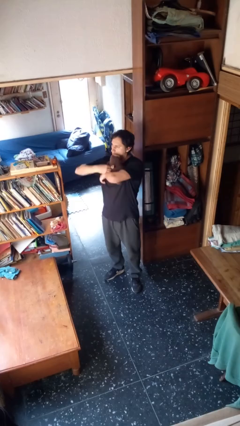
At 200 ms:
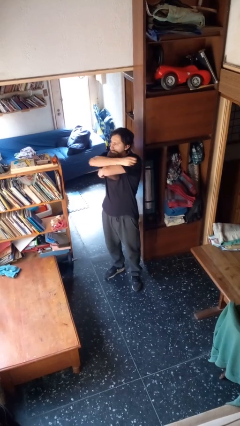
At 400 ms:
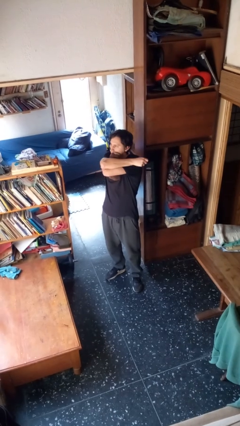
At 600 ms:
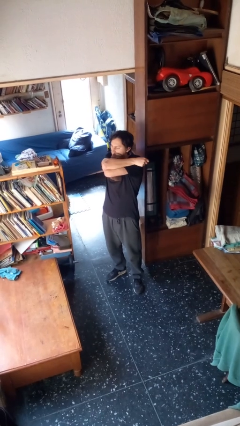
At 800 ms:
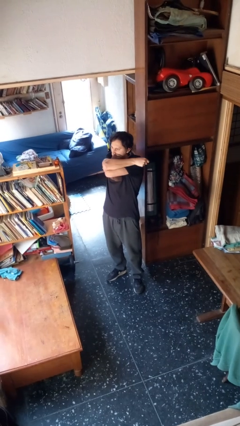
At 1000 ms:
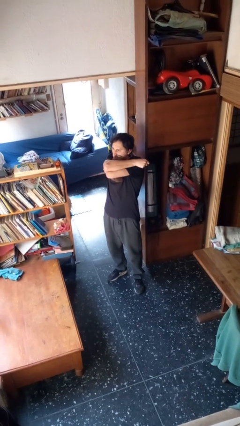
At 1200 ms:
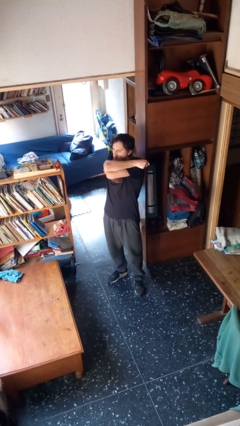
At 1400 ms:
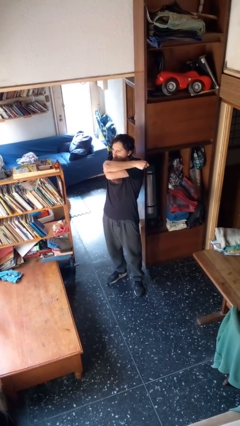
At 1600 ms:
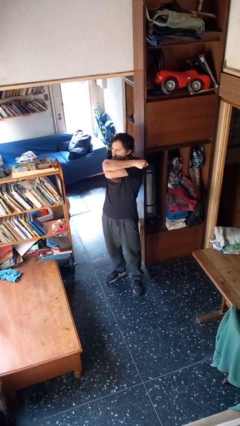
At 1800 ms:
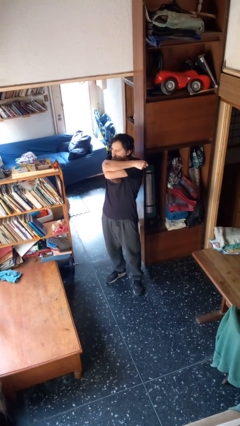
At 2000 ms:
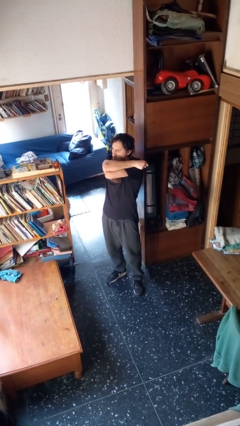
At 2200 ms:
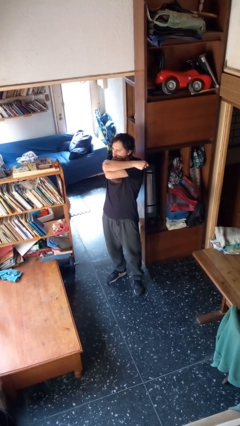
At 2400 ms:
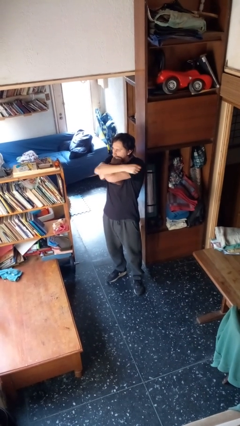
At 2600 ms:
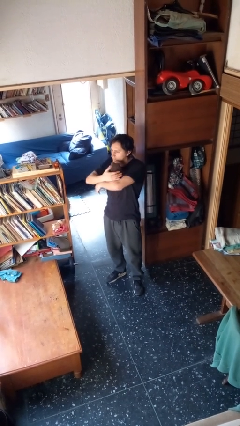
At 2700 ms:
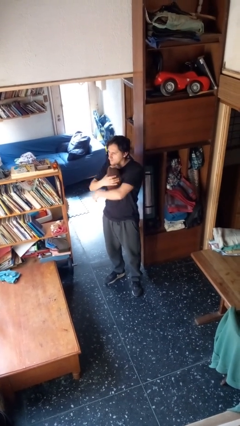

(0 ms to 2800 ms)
person hugs stuffed animal

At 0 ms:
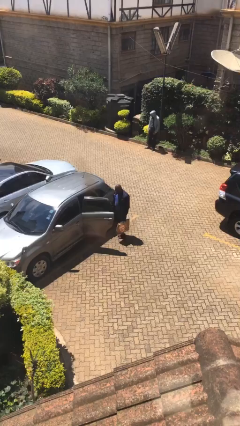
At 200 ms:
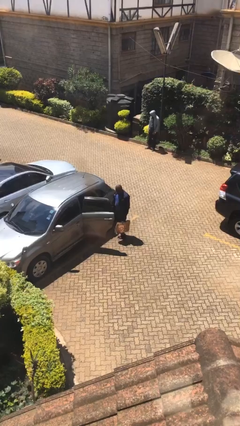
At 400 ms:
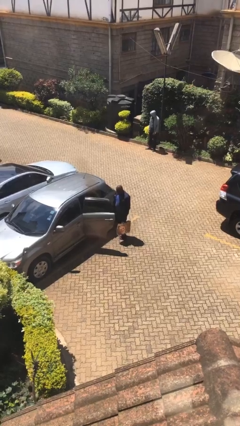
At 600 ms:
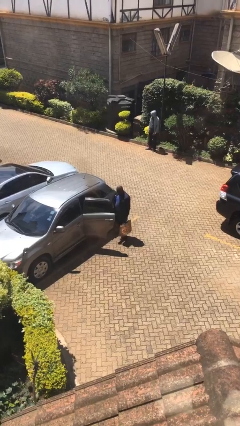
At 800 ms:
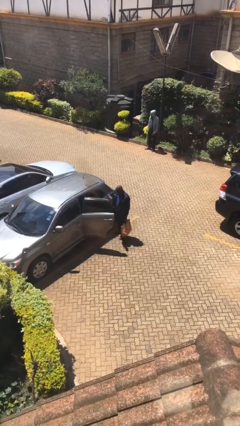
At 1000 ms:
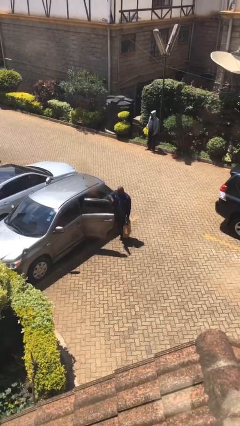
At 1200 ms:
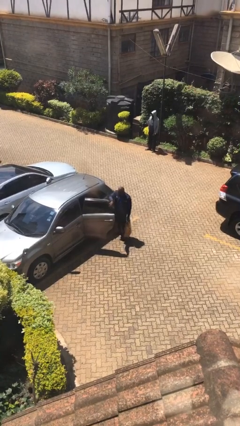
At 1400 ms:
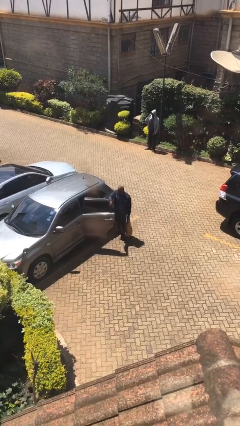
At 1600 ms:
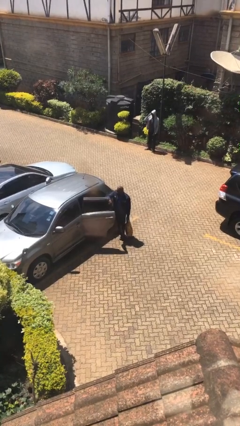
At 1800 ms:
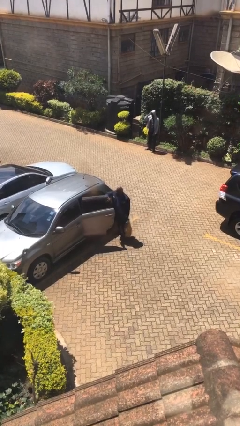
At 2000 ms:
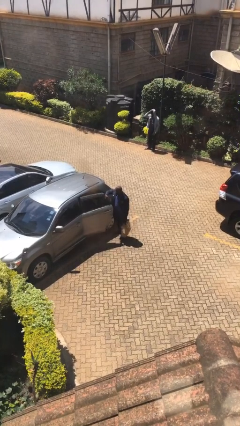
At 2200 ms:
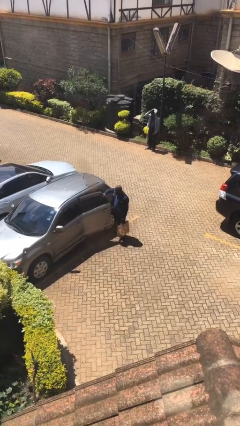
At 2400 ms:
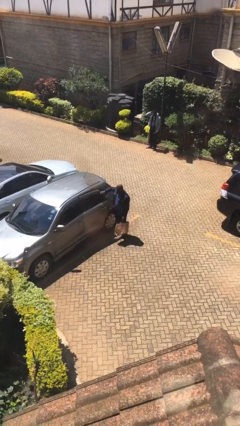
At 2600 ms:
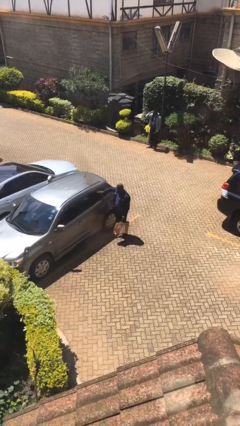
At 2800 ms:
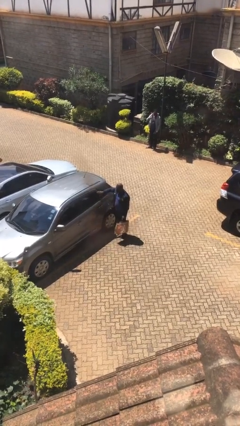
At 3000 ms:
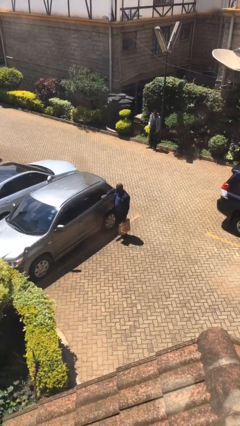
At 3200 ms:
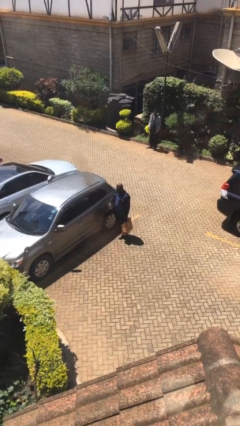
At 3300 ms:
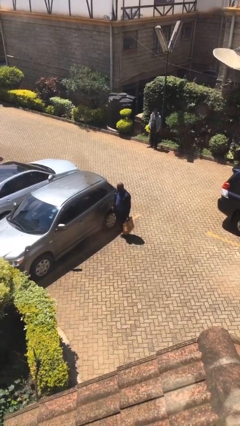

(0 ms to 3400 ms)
person closes car door

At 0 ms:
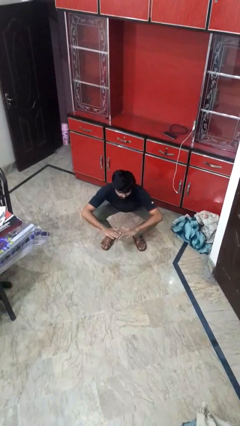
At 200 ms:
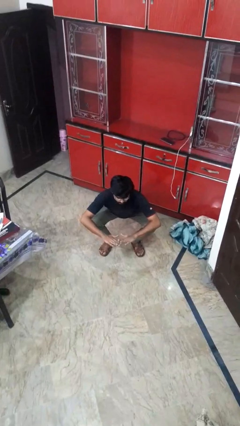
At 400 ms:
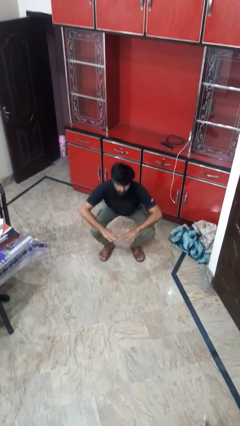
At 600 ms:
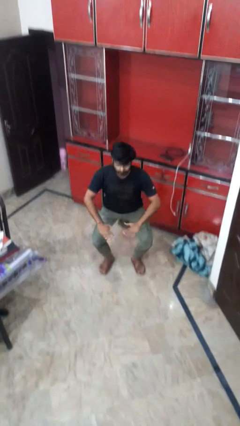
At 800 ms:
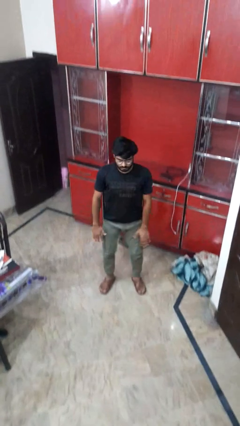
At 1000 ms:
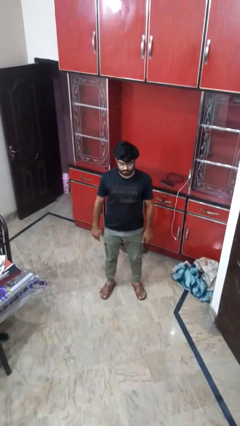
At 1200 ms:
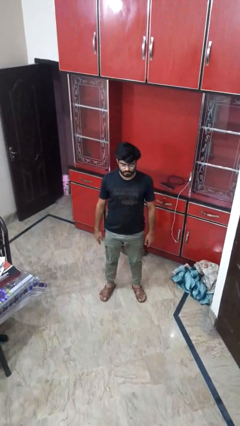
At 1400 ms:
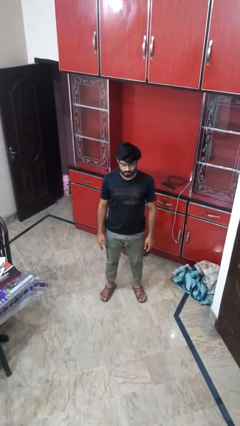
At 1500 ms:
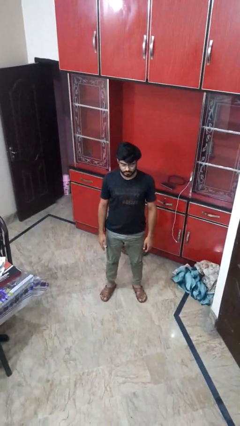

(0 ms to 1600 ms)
person stands up

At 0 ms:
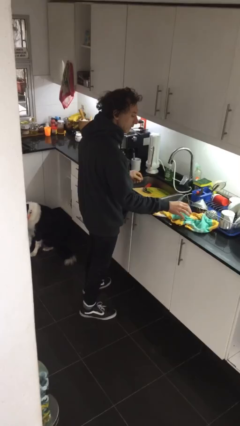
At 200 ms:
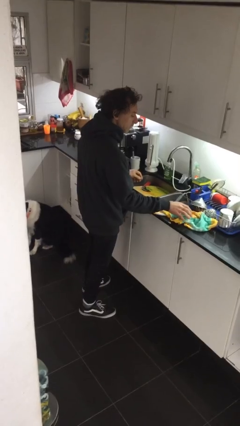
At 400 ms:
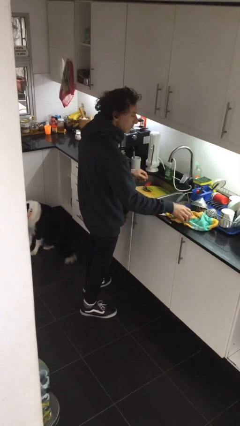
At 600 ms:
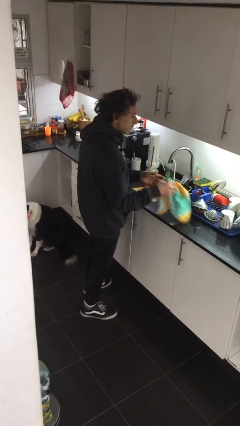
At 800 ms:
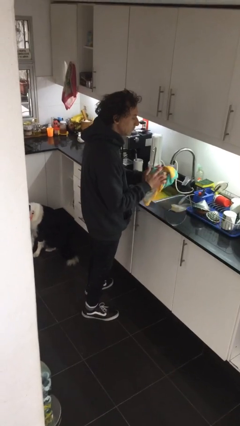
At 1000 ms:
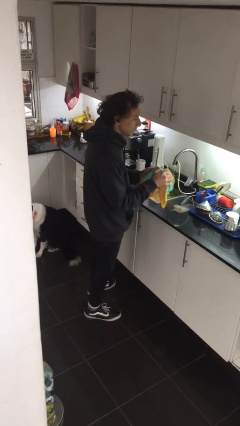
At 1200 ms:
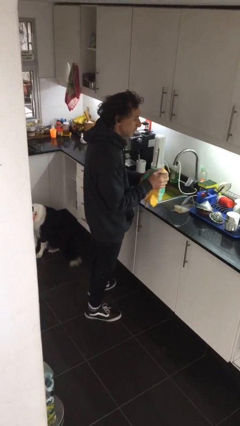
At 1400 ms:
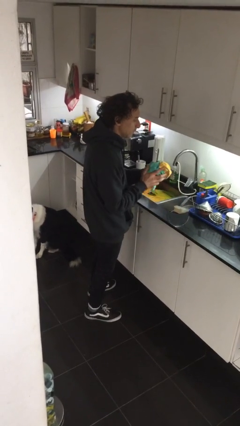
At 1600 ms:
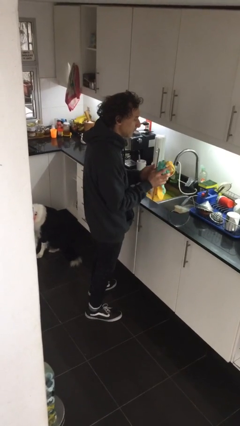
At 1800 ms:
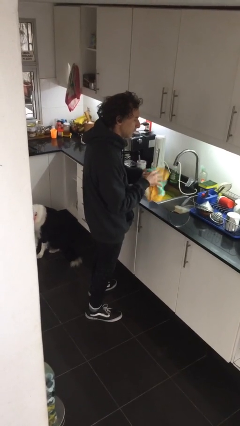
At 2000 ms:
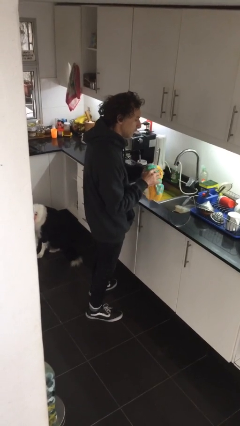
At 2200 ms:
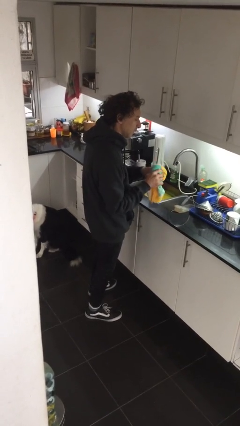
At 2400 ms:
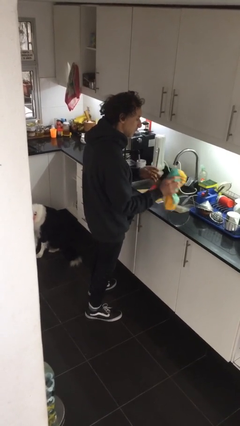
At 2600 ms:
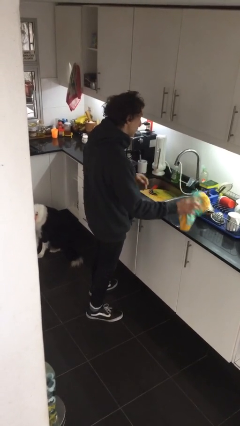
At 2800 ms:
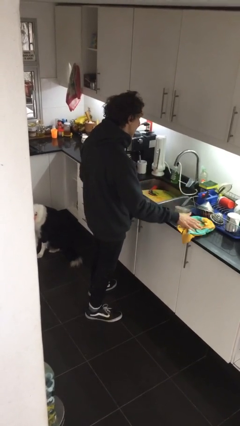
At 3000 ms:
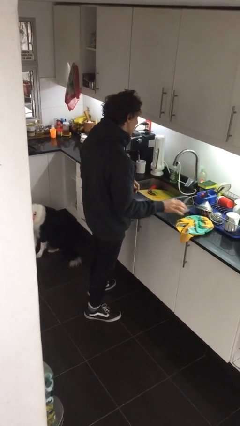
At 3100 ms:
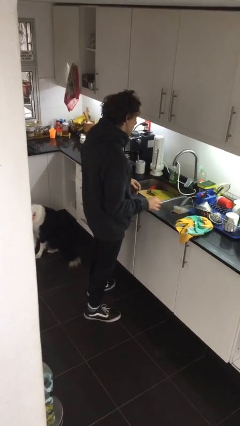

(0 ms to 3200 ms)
person dries hands with towel

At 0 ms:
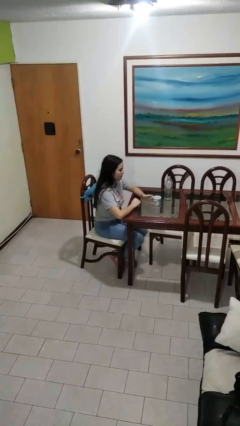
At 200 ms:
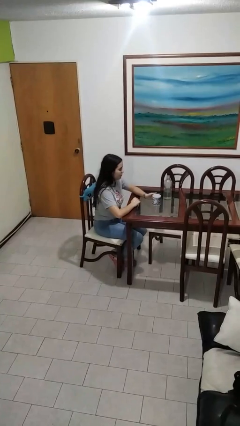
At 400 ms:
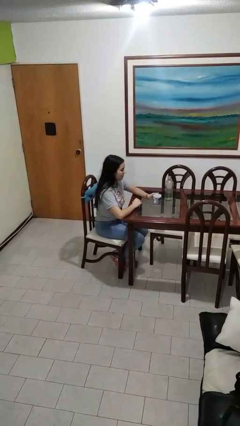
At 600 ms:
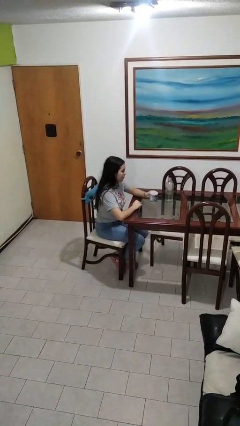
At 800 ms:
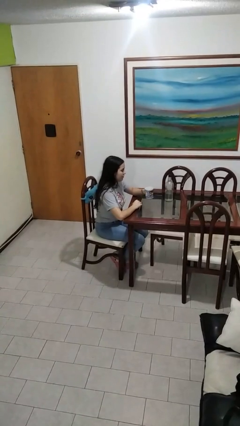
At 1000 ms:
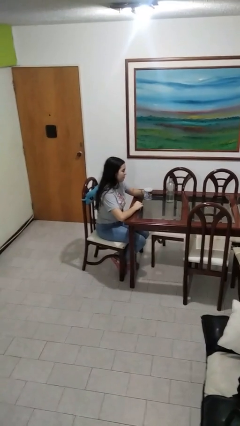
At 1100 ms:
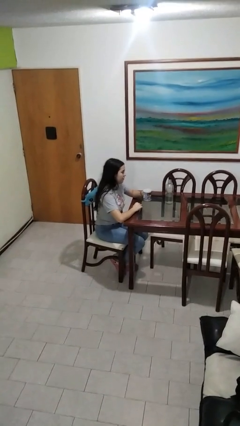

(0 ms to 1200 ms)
person picks up object from table

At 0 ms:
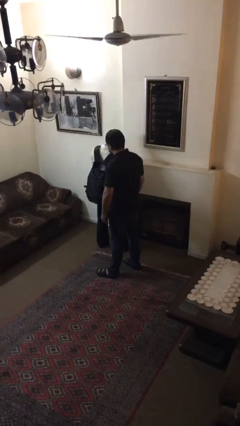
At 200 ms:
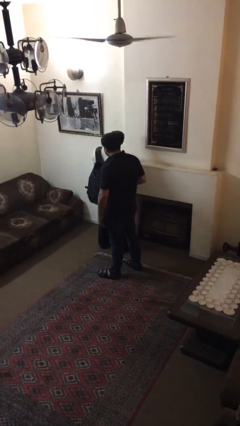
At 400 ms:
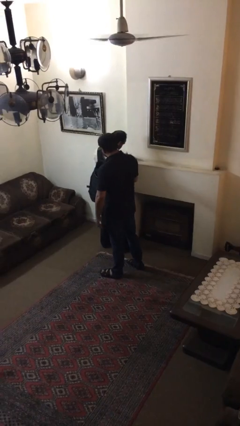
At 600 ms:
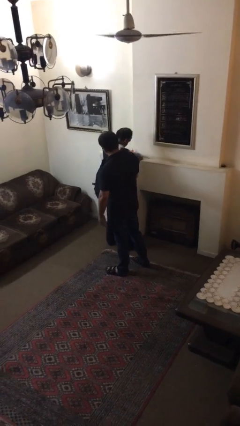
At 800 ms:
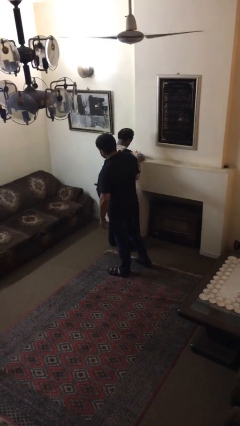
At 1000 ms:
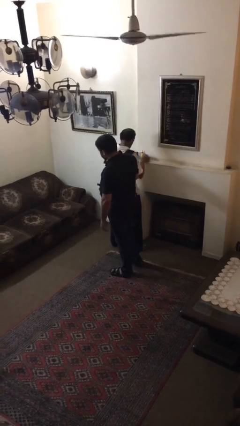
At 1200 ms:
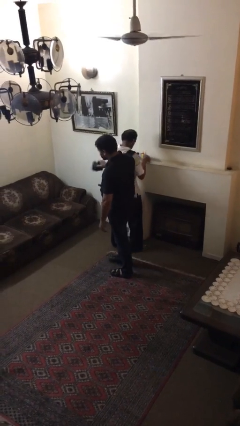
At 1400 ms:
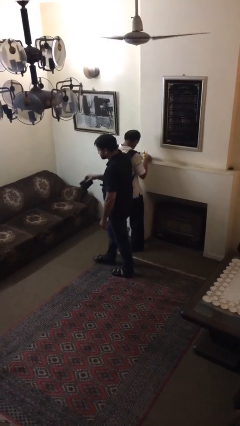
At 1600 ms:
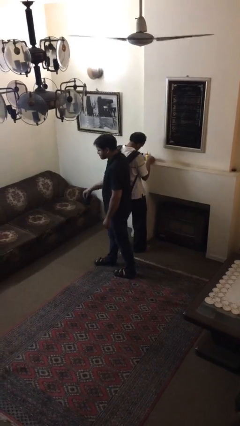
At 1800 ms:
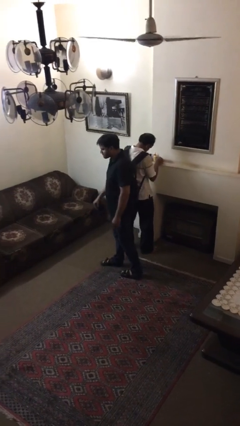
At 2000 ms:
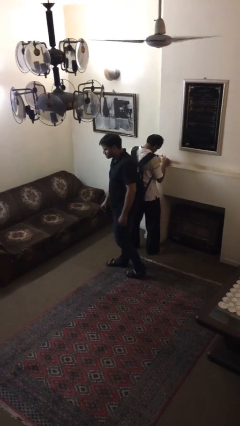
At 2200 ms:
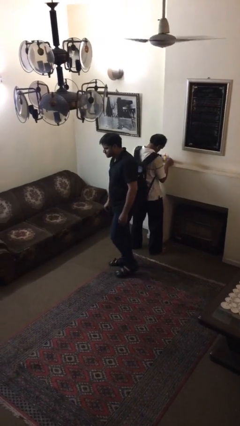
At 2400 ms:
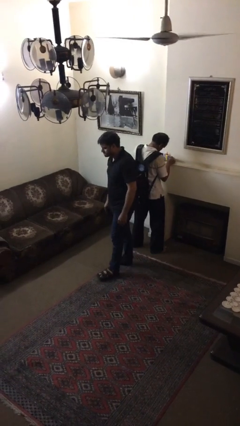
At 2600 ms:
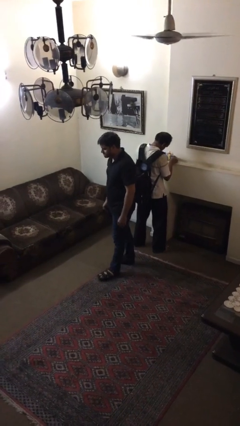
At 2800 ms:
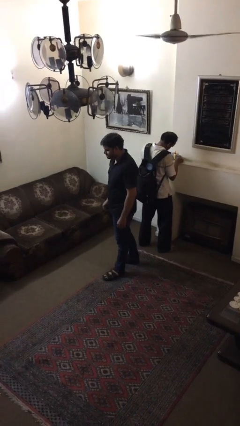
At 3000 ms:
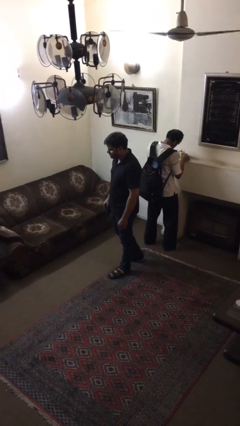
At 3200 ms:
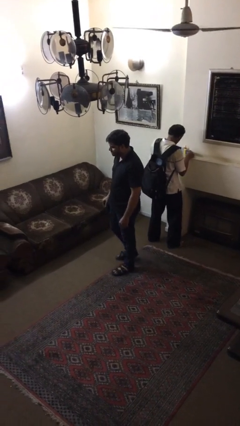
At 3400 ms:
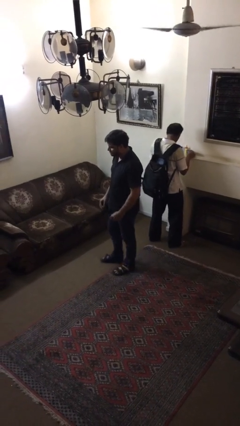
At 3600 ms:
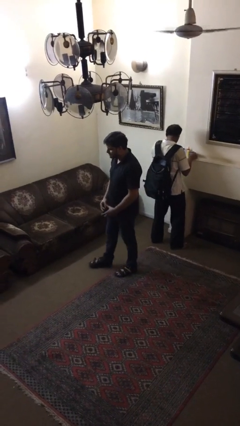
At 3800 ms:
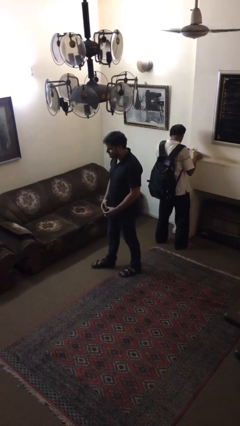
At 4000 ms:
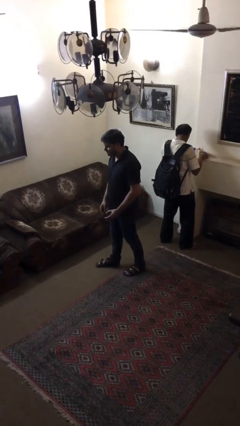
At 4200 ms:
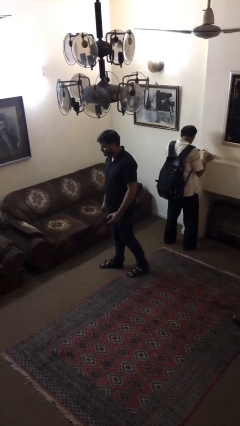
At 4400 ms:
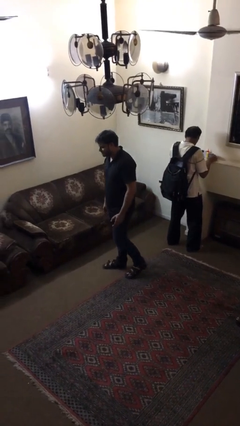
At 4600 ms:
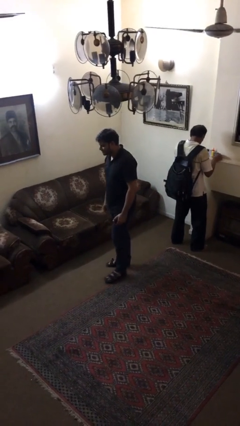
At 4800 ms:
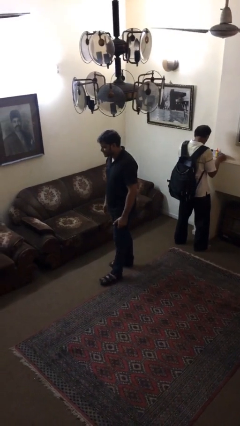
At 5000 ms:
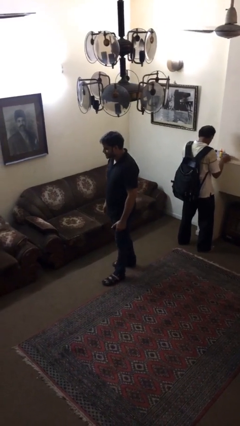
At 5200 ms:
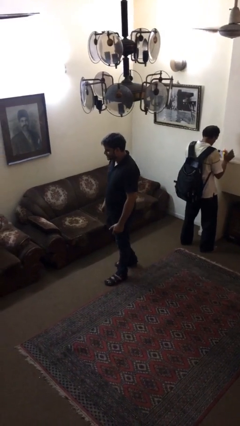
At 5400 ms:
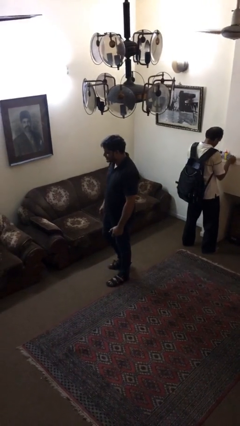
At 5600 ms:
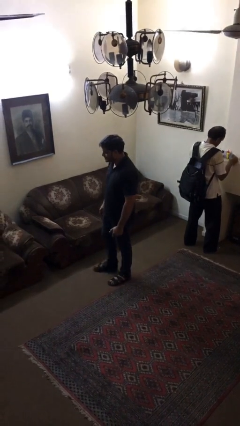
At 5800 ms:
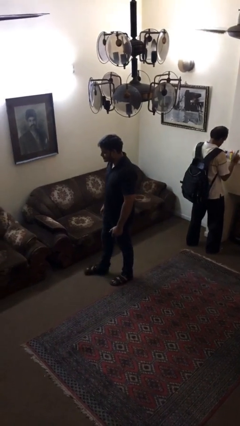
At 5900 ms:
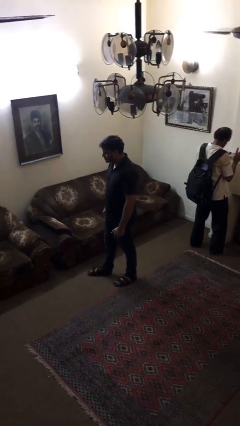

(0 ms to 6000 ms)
person steals object from person
